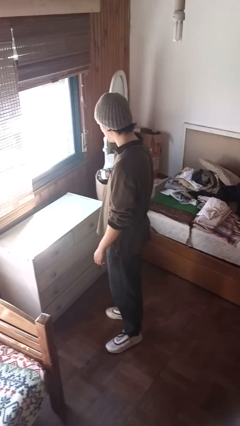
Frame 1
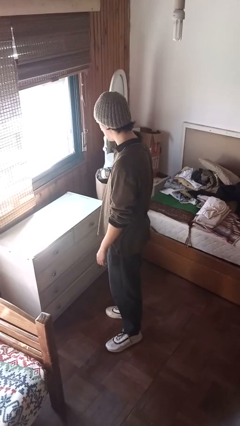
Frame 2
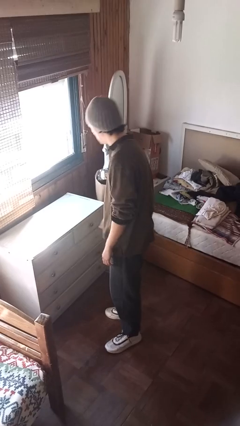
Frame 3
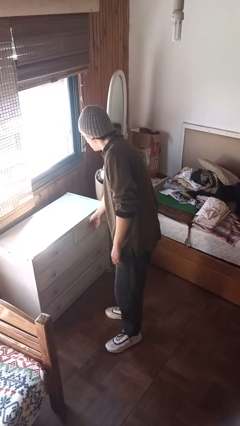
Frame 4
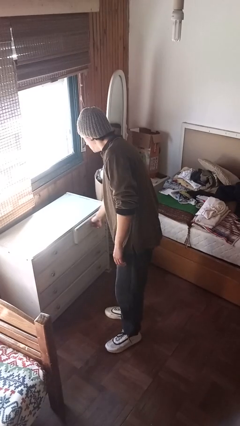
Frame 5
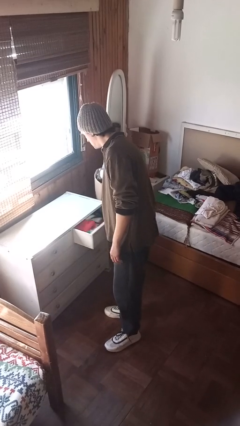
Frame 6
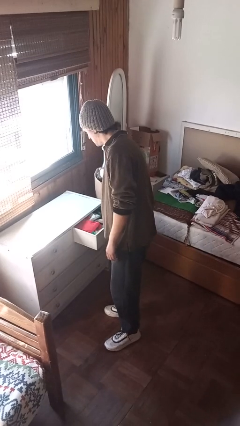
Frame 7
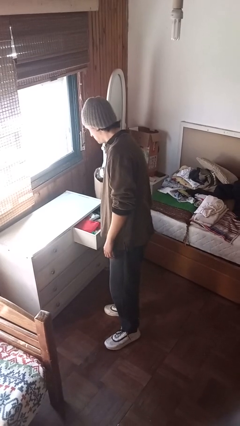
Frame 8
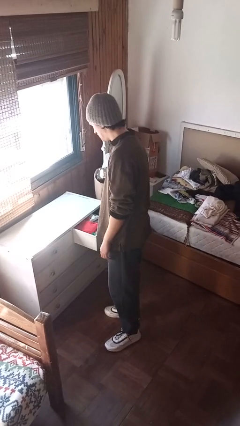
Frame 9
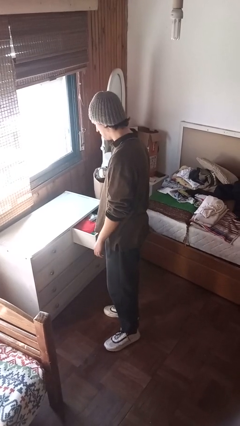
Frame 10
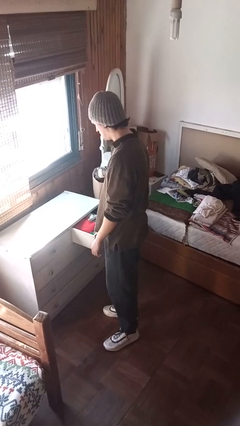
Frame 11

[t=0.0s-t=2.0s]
person opens dresser drawer

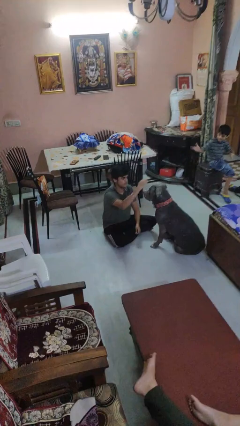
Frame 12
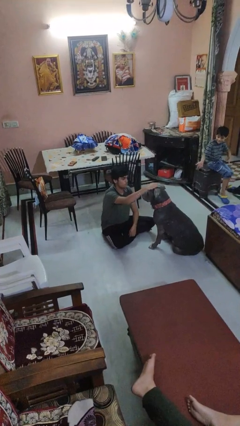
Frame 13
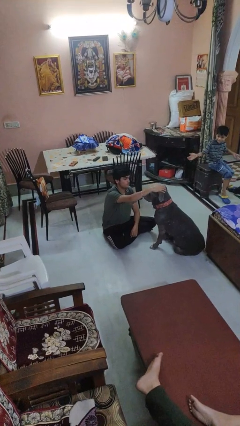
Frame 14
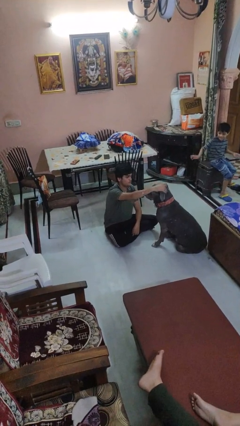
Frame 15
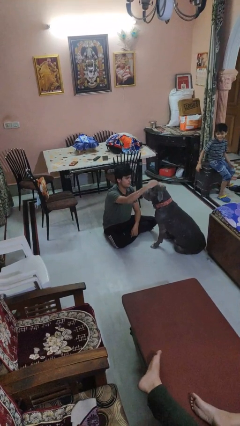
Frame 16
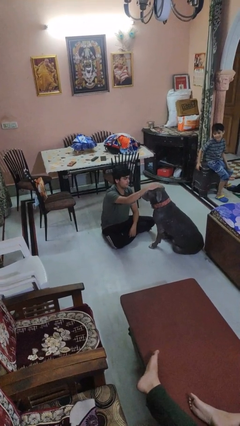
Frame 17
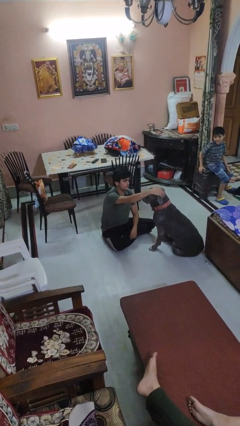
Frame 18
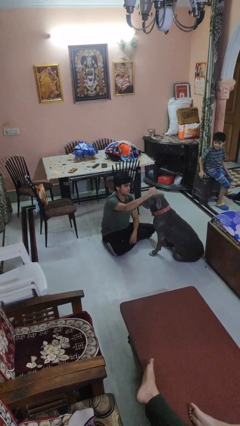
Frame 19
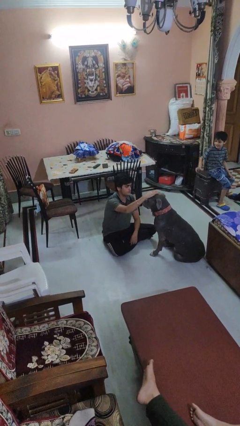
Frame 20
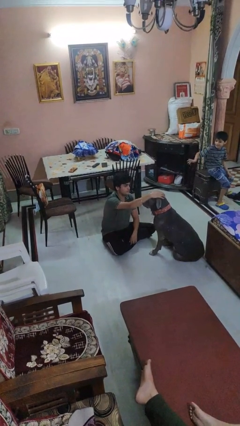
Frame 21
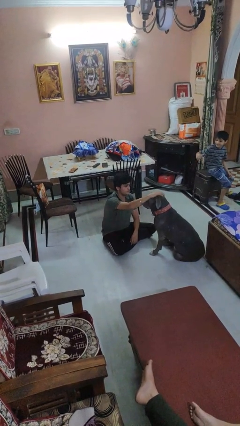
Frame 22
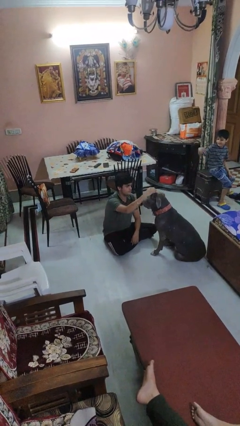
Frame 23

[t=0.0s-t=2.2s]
person pets dog

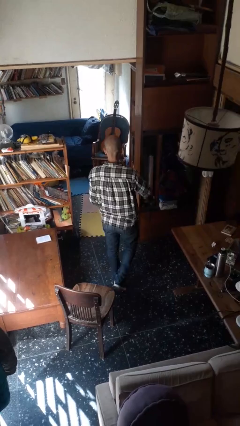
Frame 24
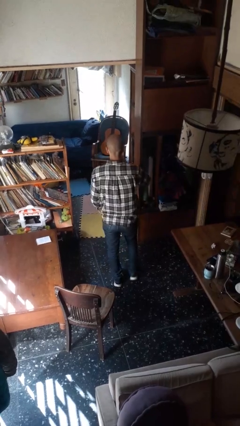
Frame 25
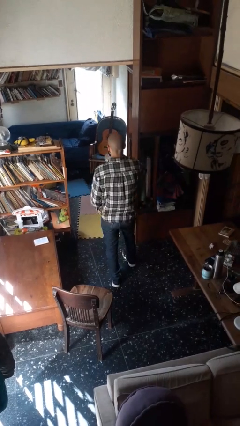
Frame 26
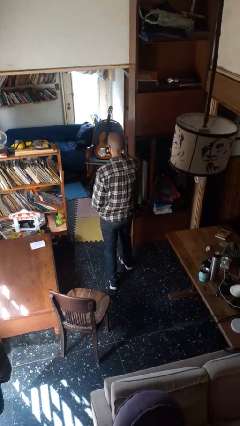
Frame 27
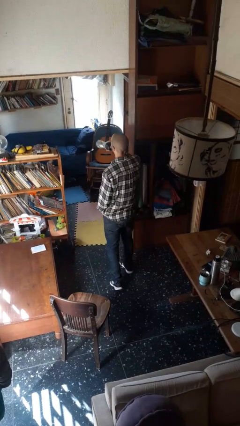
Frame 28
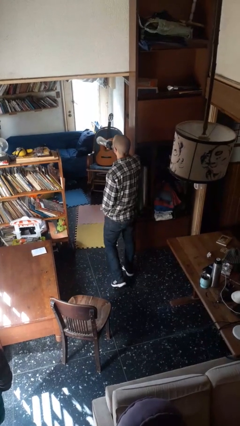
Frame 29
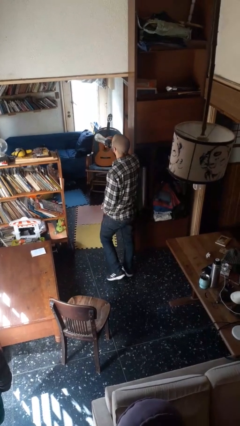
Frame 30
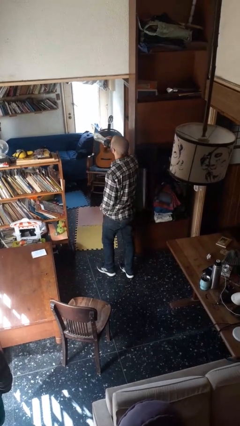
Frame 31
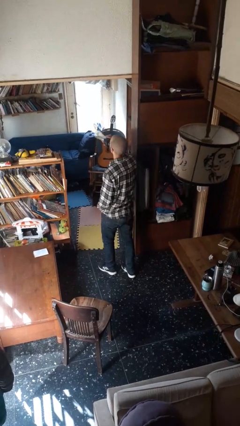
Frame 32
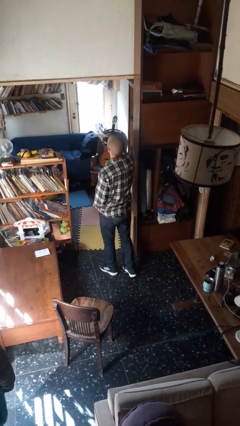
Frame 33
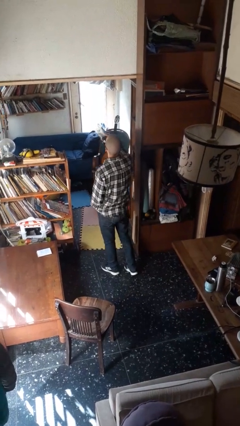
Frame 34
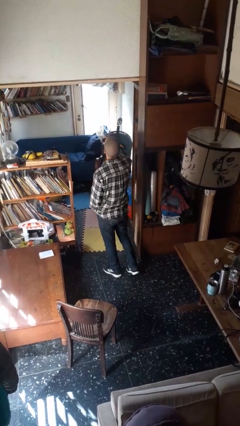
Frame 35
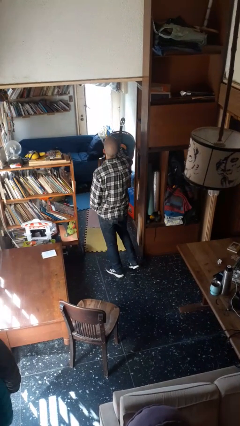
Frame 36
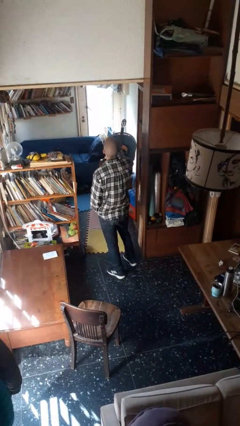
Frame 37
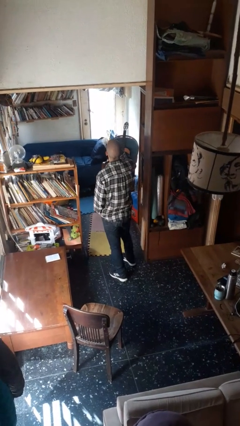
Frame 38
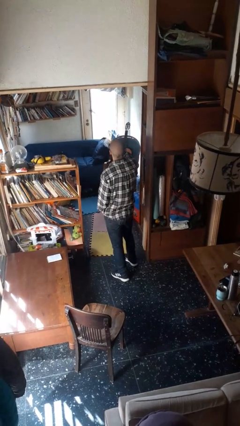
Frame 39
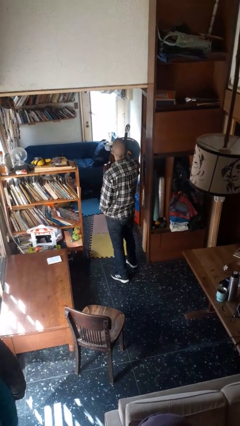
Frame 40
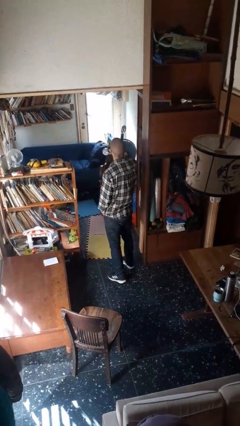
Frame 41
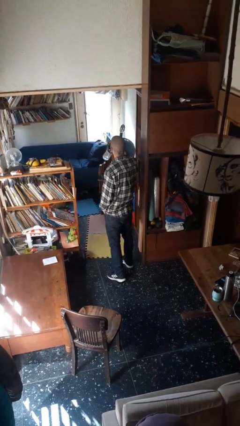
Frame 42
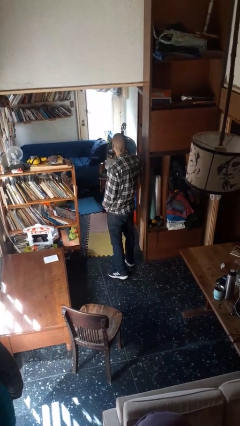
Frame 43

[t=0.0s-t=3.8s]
person drinks from bottle

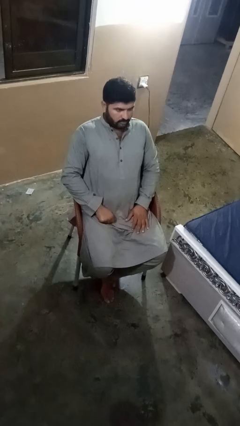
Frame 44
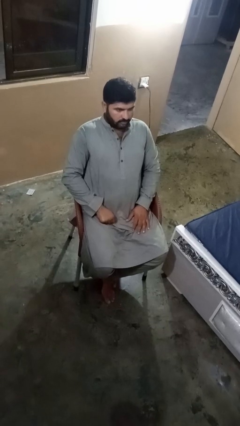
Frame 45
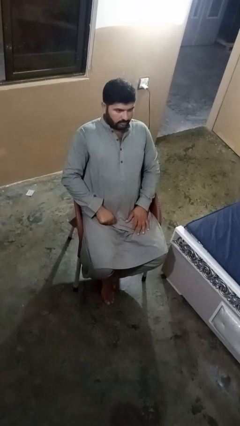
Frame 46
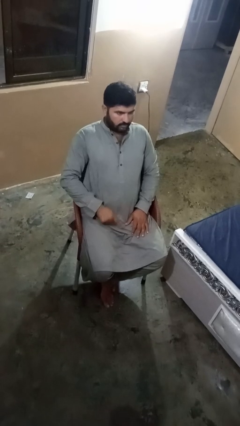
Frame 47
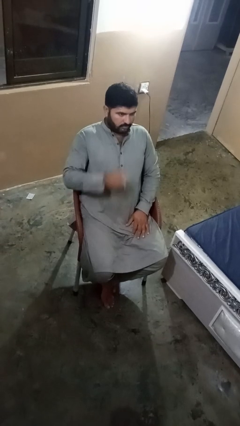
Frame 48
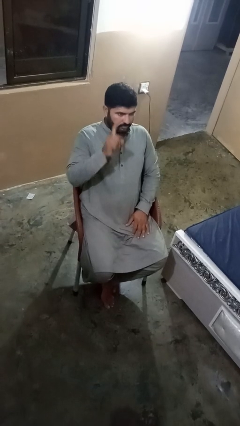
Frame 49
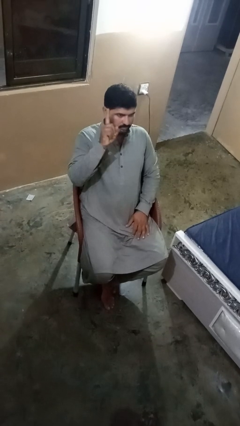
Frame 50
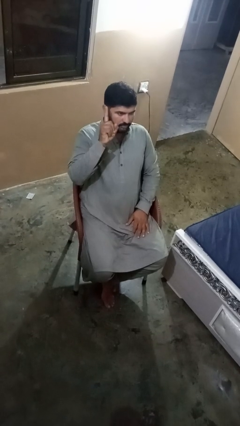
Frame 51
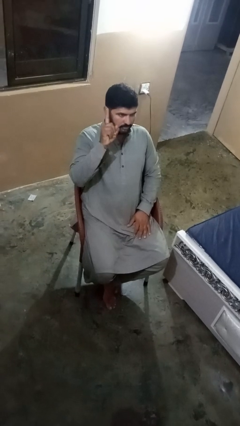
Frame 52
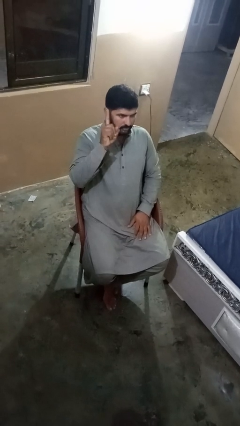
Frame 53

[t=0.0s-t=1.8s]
person gestures number one

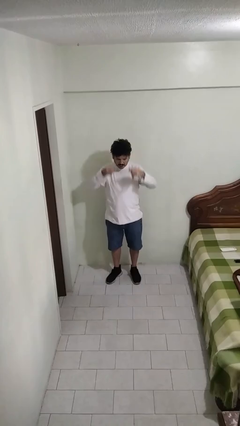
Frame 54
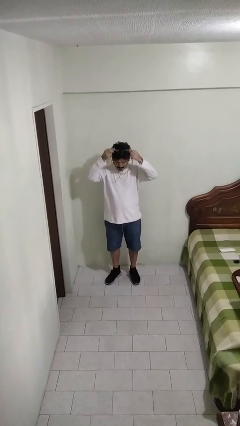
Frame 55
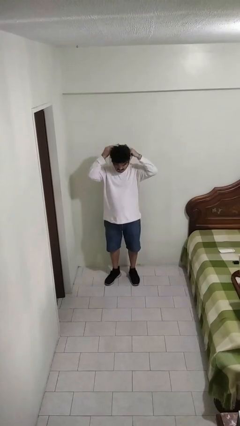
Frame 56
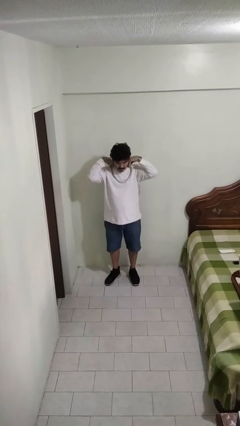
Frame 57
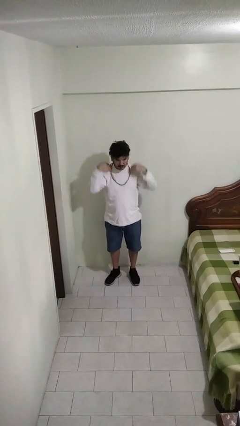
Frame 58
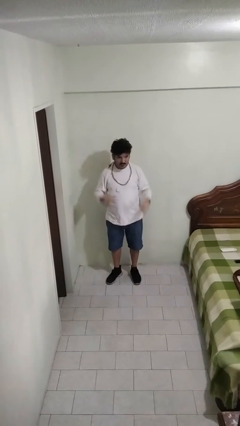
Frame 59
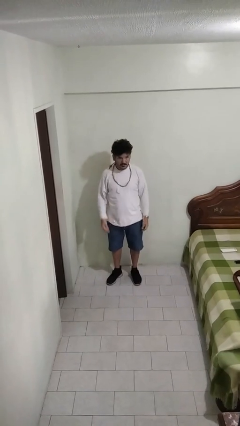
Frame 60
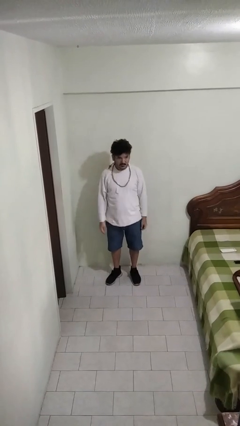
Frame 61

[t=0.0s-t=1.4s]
person puts on necklace

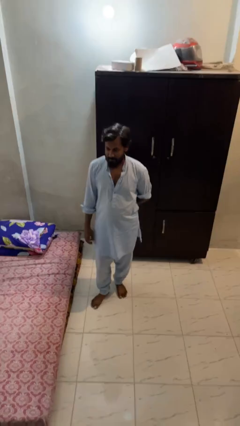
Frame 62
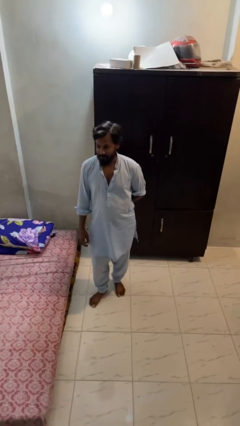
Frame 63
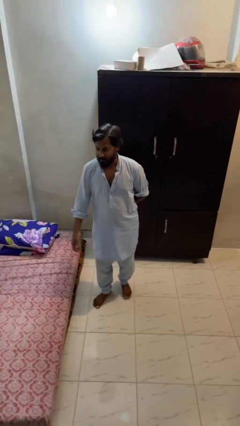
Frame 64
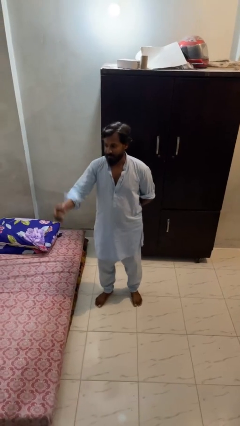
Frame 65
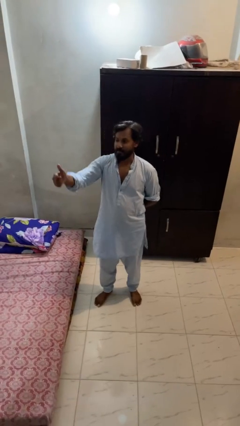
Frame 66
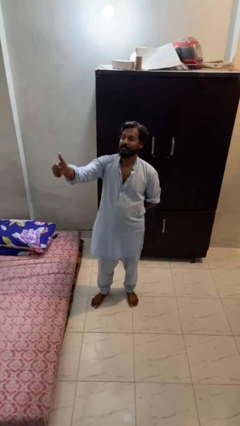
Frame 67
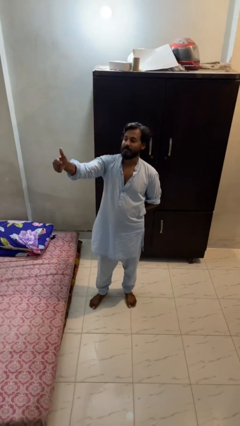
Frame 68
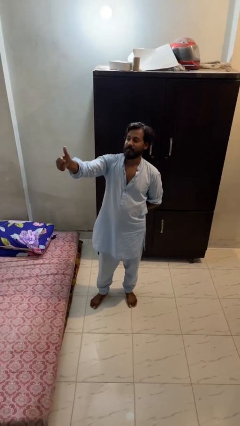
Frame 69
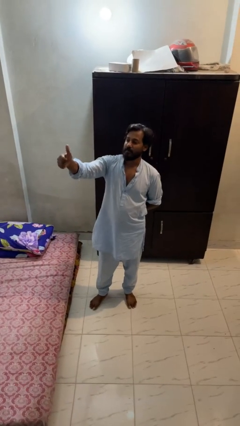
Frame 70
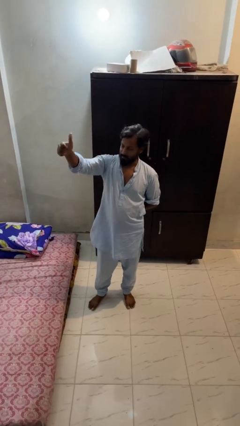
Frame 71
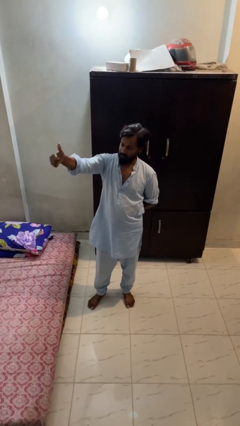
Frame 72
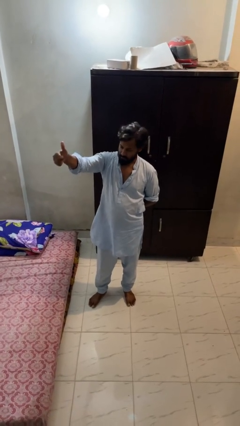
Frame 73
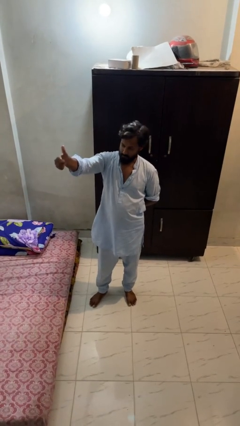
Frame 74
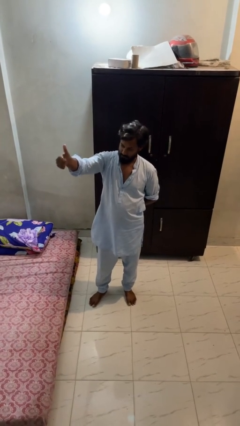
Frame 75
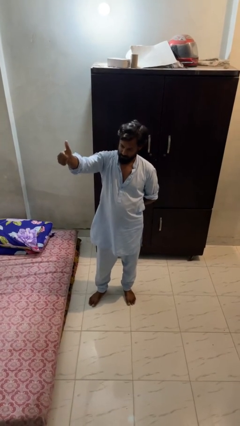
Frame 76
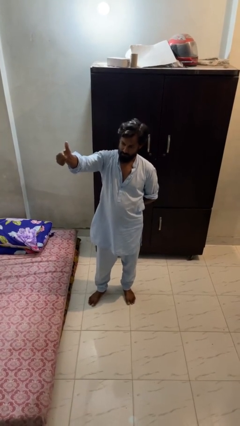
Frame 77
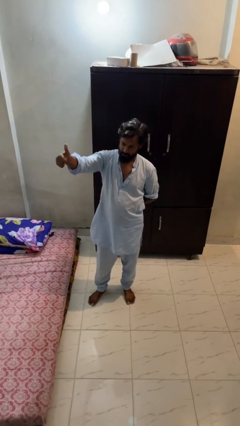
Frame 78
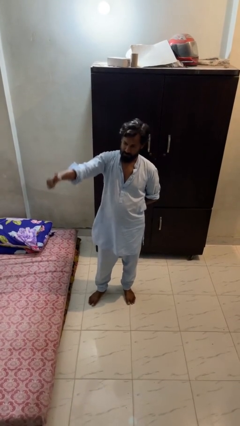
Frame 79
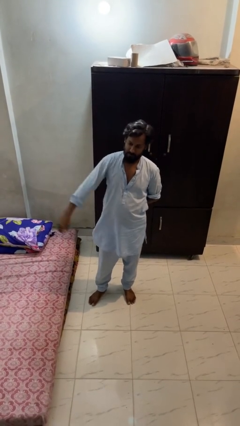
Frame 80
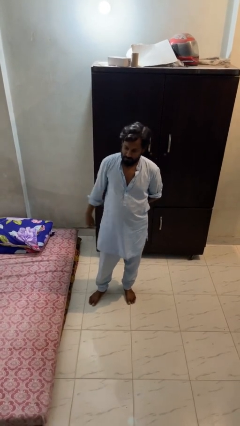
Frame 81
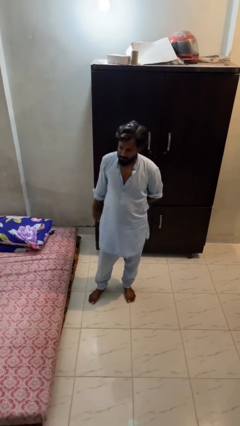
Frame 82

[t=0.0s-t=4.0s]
person gestures thumbs up

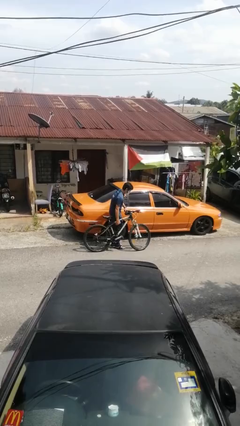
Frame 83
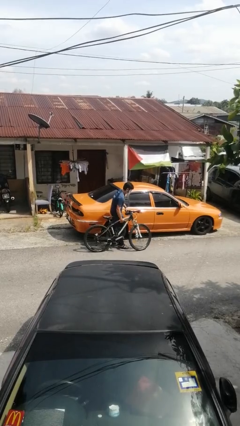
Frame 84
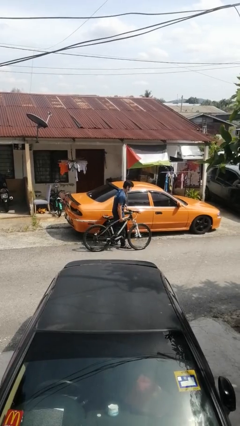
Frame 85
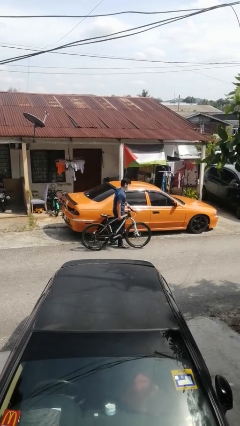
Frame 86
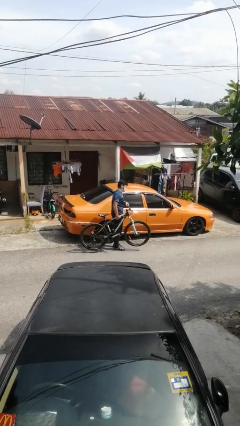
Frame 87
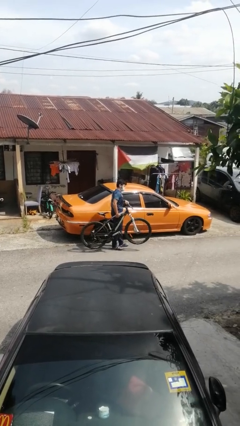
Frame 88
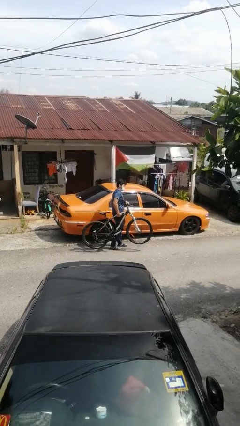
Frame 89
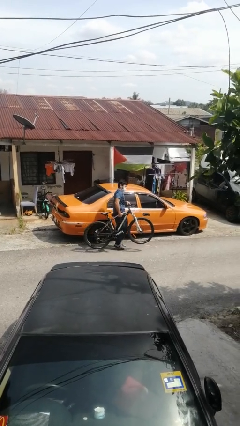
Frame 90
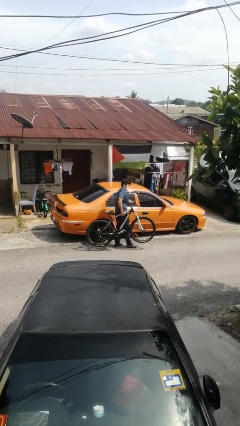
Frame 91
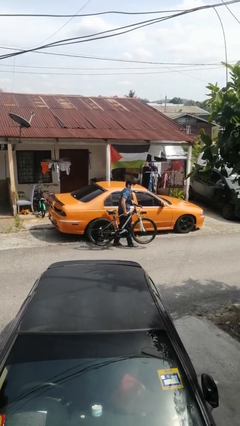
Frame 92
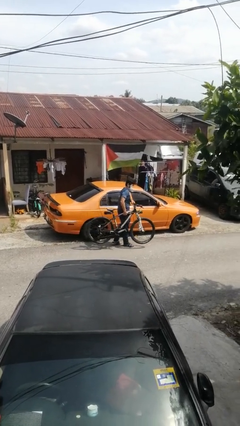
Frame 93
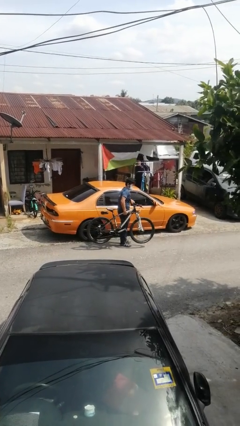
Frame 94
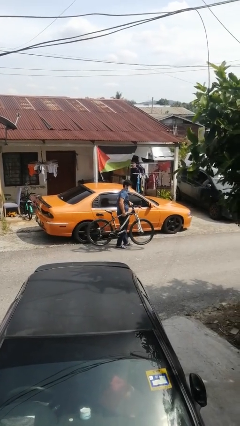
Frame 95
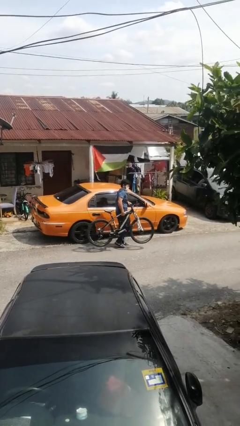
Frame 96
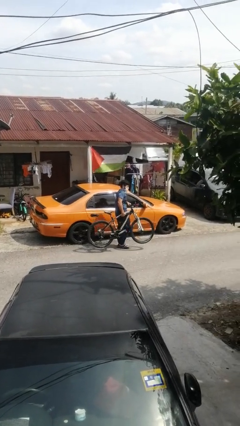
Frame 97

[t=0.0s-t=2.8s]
person carries bicycle
